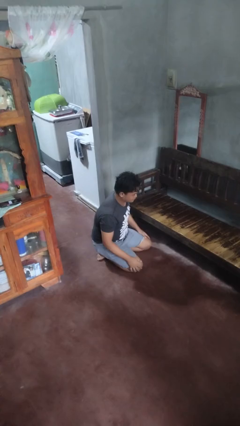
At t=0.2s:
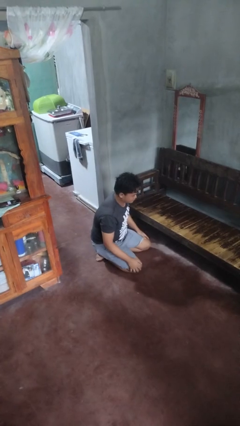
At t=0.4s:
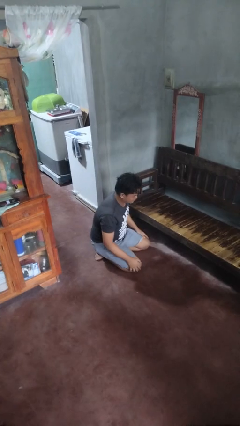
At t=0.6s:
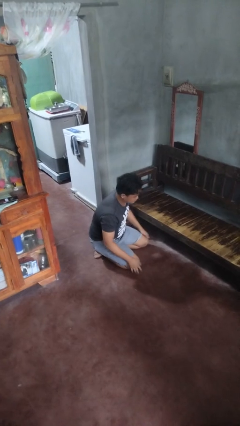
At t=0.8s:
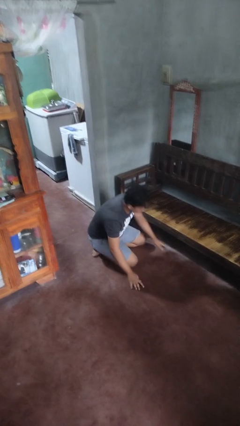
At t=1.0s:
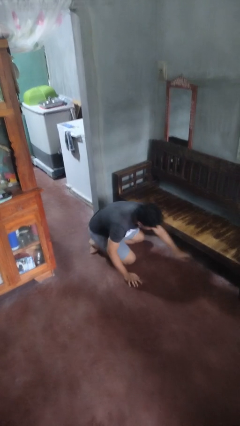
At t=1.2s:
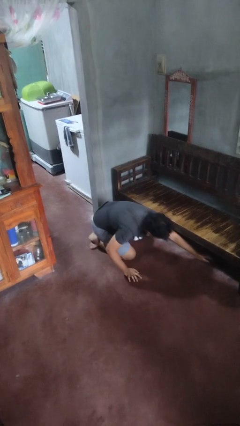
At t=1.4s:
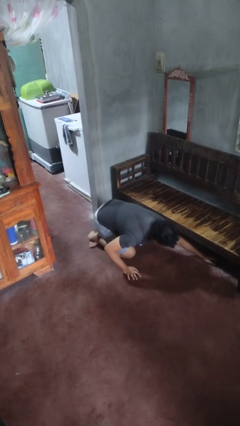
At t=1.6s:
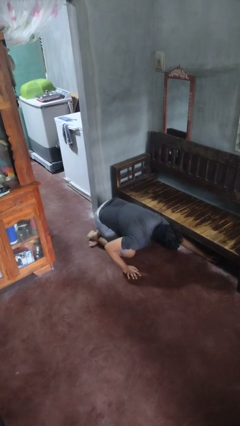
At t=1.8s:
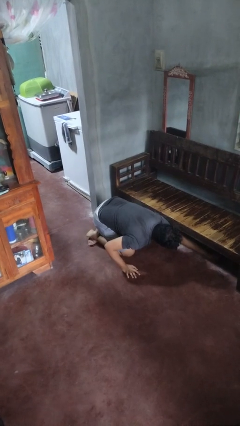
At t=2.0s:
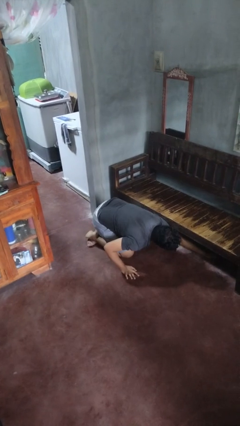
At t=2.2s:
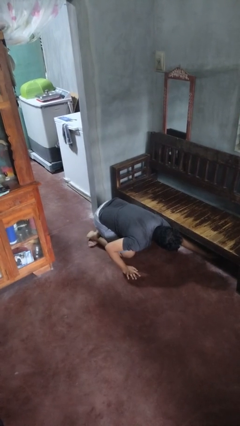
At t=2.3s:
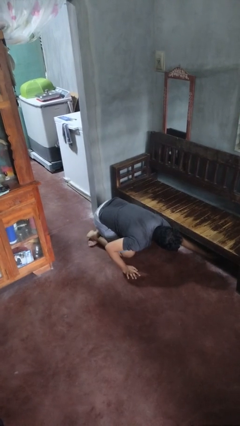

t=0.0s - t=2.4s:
person searches under couch

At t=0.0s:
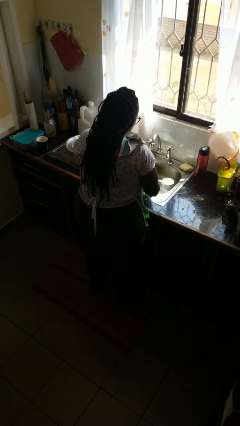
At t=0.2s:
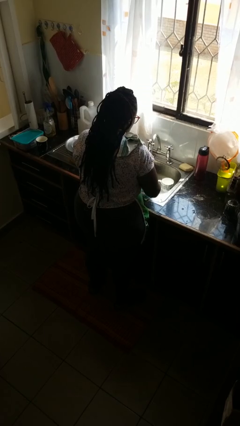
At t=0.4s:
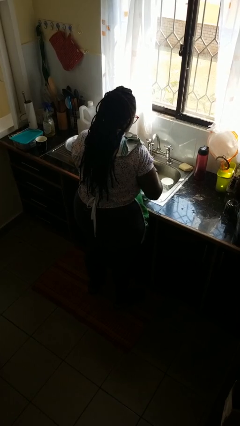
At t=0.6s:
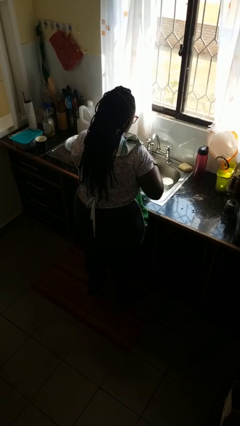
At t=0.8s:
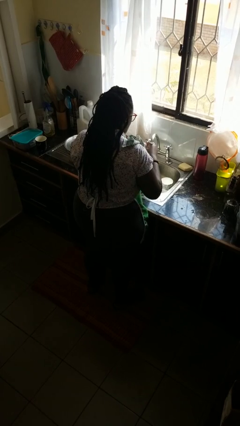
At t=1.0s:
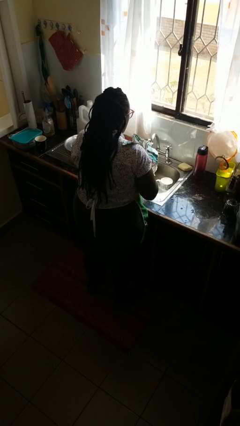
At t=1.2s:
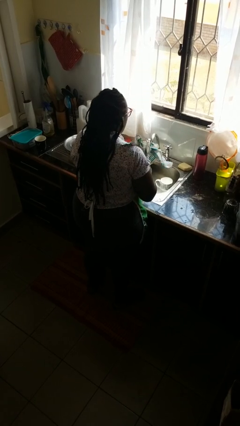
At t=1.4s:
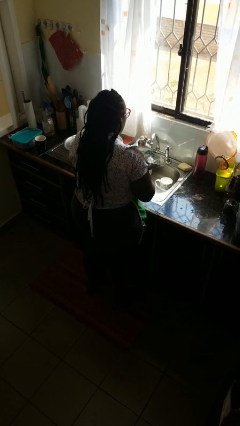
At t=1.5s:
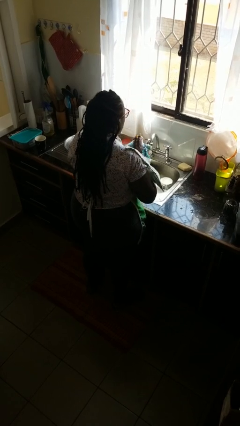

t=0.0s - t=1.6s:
person dries hands with towel

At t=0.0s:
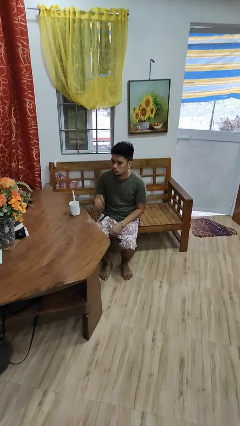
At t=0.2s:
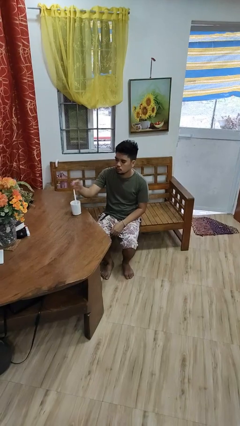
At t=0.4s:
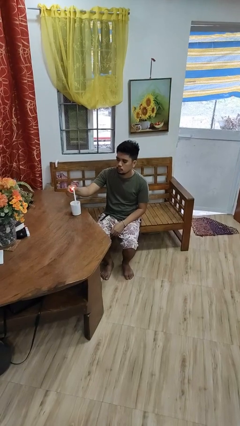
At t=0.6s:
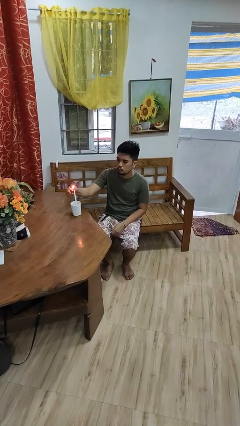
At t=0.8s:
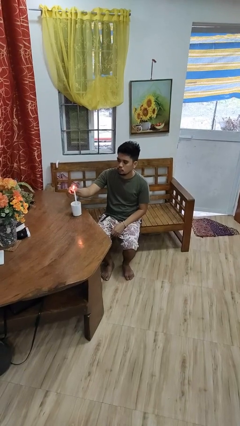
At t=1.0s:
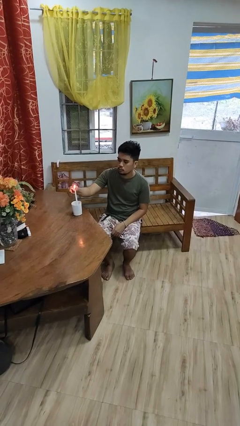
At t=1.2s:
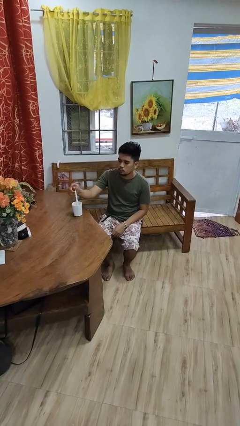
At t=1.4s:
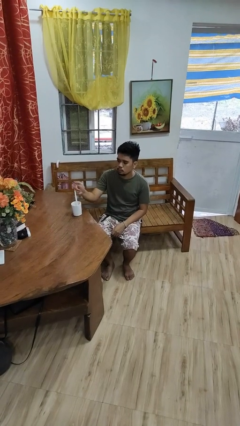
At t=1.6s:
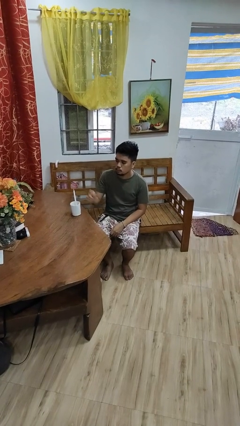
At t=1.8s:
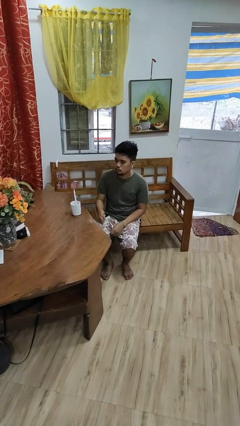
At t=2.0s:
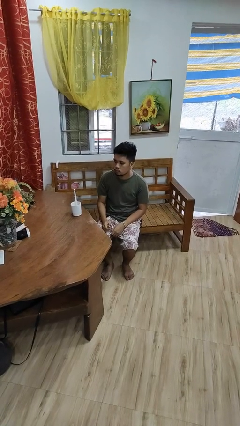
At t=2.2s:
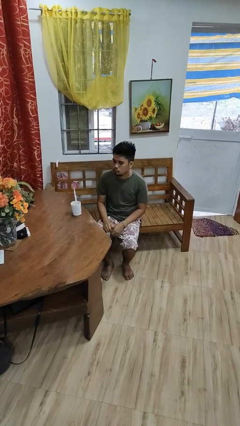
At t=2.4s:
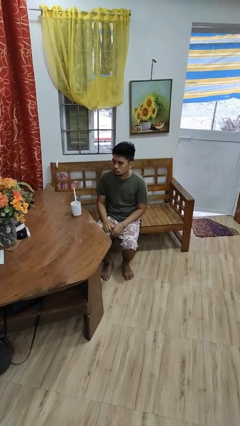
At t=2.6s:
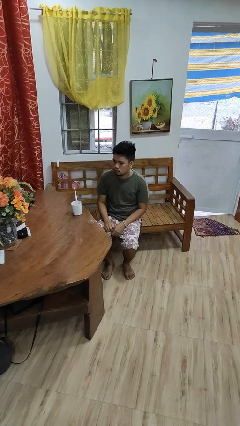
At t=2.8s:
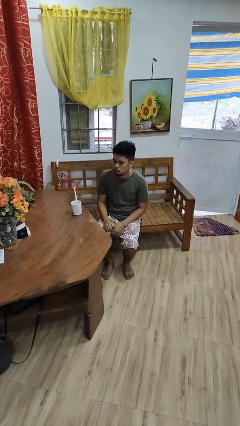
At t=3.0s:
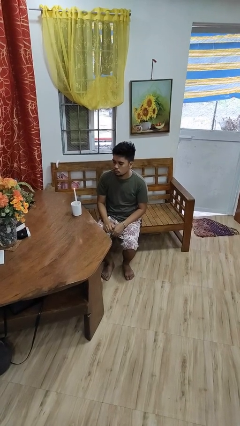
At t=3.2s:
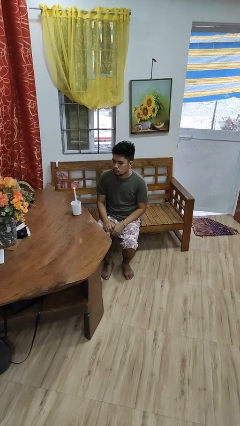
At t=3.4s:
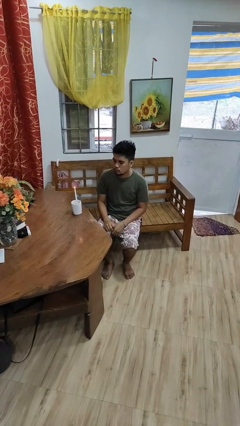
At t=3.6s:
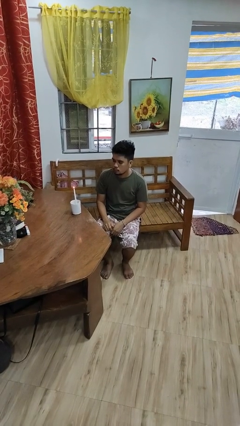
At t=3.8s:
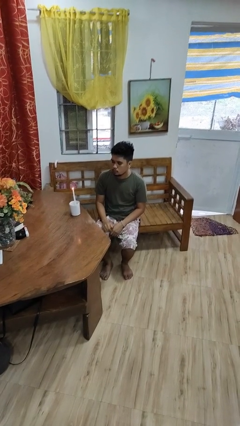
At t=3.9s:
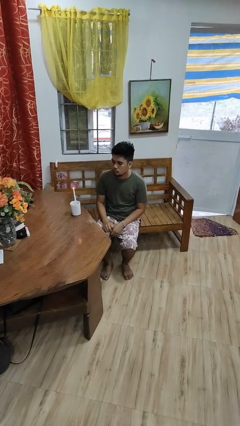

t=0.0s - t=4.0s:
person lights candle

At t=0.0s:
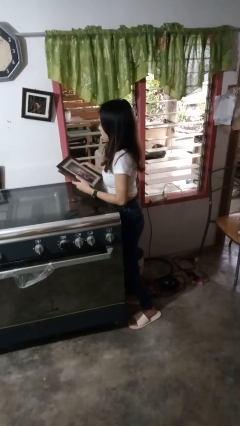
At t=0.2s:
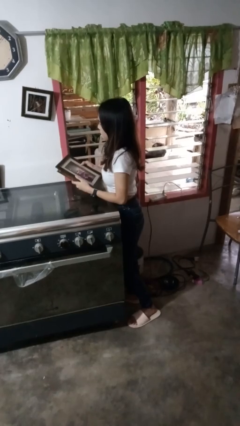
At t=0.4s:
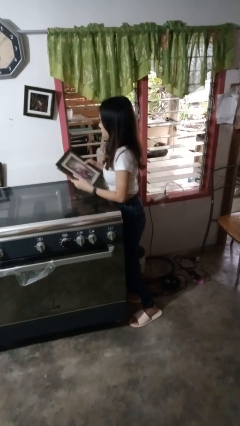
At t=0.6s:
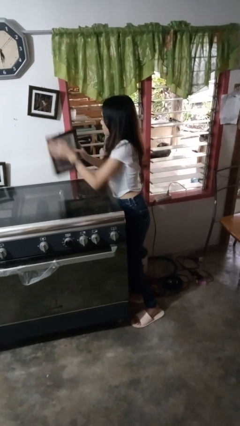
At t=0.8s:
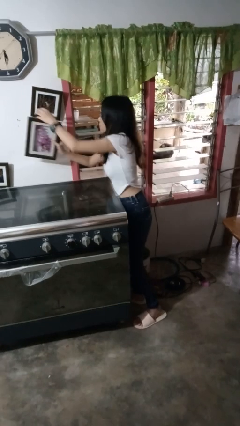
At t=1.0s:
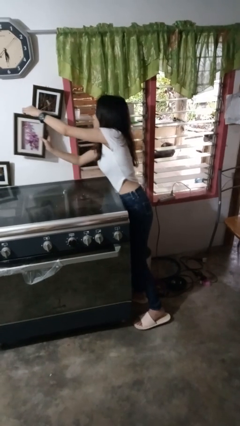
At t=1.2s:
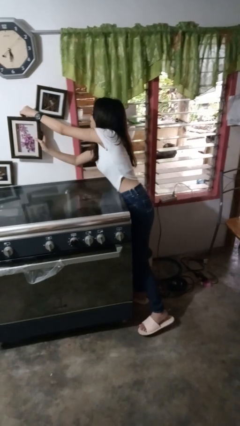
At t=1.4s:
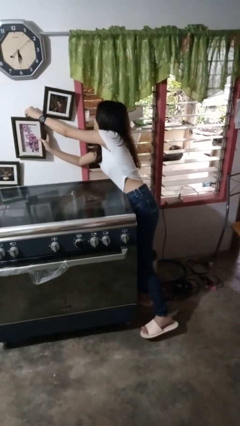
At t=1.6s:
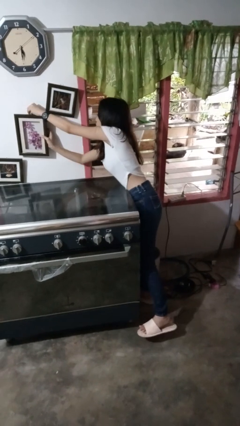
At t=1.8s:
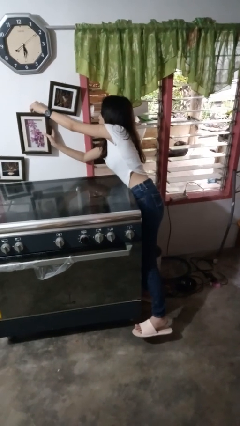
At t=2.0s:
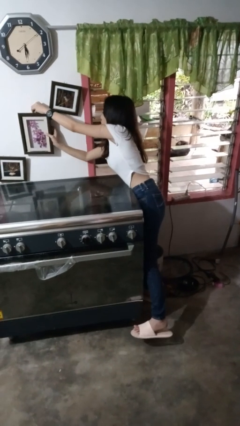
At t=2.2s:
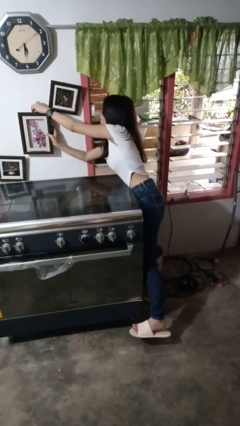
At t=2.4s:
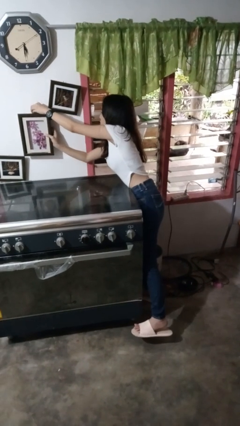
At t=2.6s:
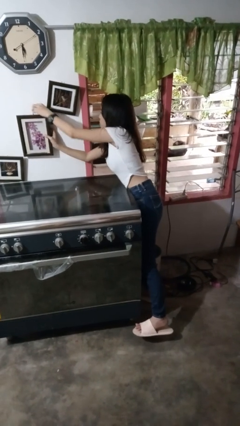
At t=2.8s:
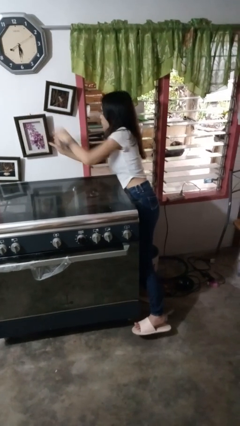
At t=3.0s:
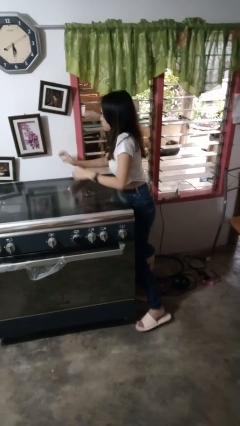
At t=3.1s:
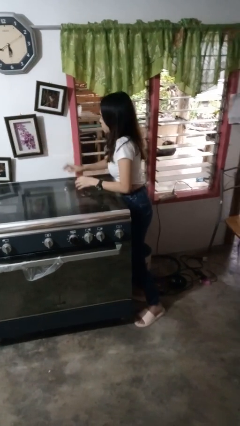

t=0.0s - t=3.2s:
person puts up picture frame

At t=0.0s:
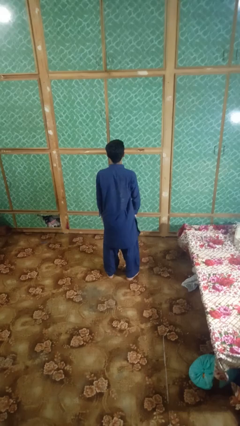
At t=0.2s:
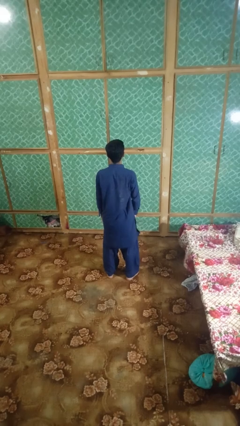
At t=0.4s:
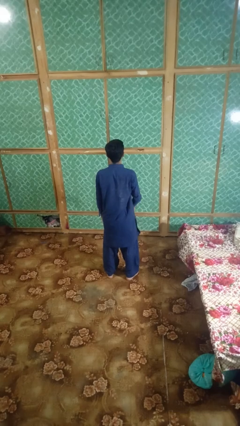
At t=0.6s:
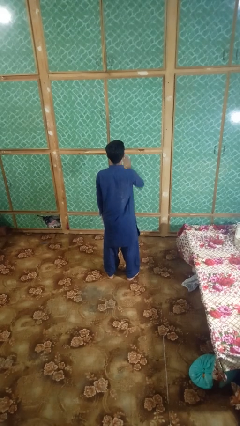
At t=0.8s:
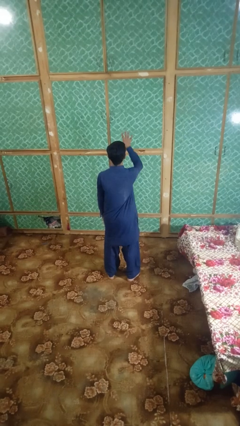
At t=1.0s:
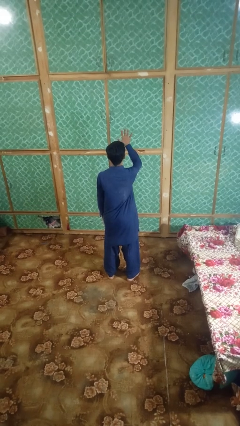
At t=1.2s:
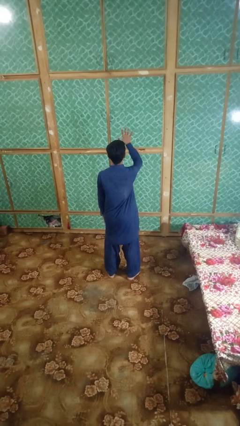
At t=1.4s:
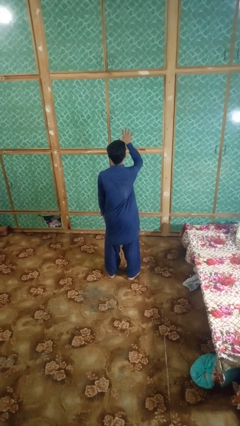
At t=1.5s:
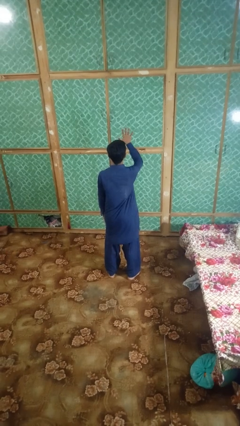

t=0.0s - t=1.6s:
person gestures number five

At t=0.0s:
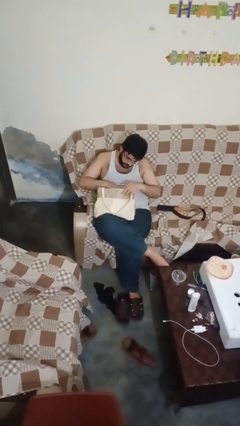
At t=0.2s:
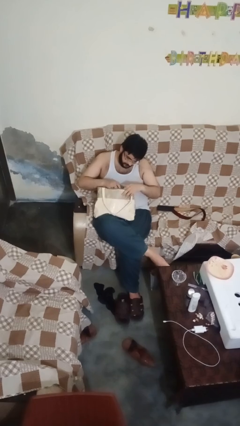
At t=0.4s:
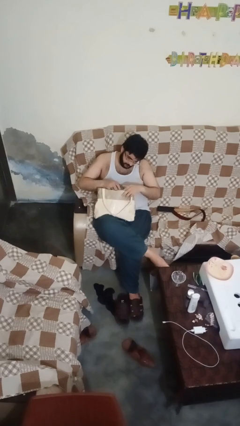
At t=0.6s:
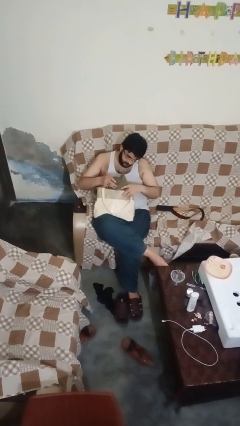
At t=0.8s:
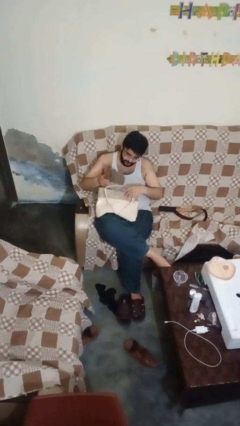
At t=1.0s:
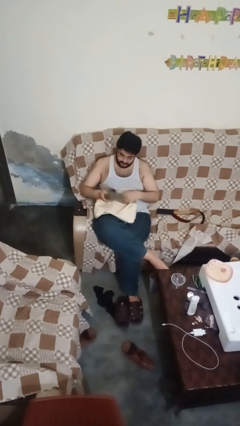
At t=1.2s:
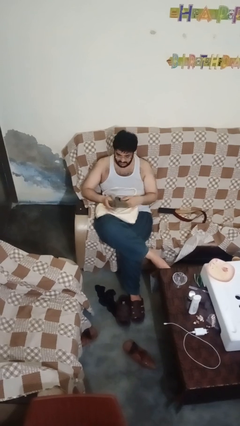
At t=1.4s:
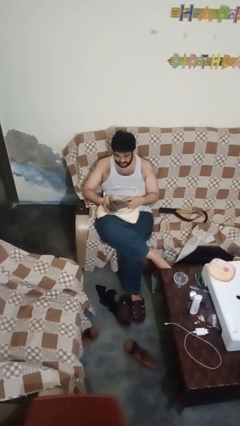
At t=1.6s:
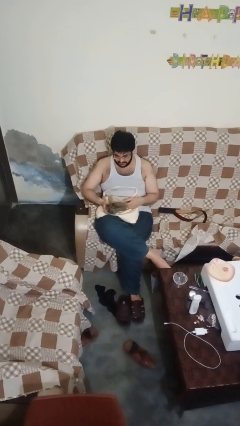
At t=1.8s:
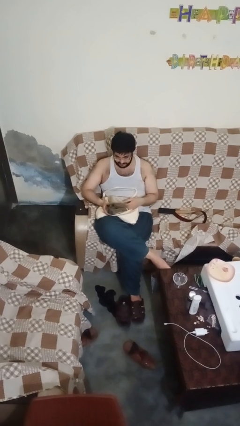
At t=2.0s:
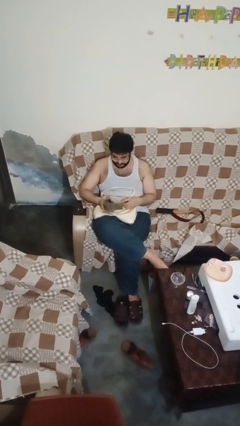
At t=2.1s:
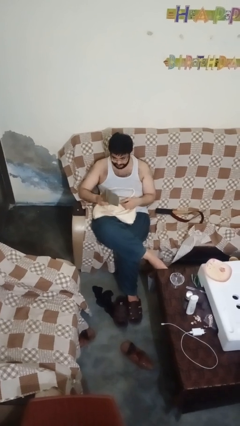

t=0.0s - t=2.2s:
person takes object from purse

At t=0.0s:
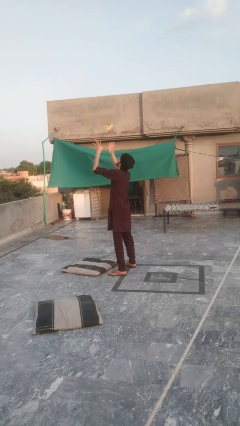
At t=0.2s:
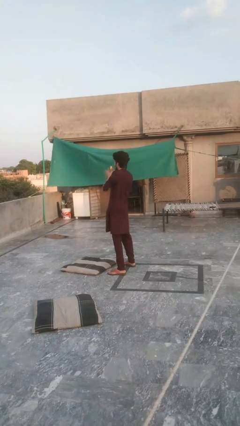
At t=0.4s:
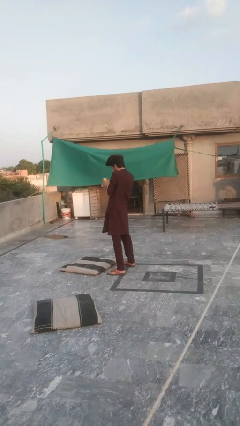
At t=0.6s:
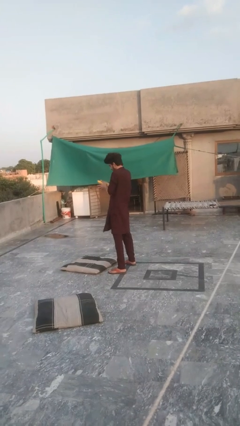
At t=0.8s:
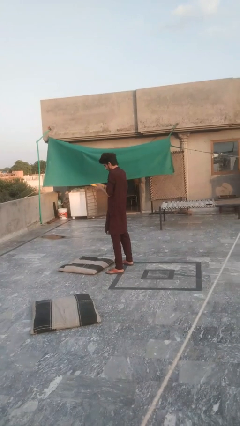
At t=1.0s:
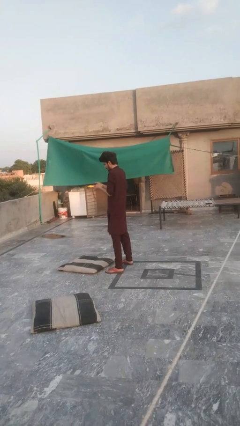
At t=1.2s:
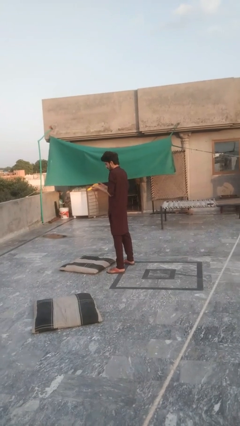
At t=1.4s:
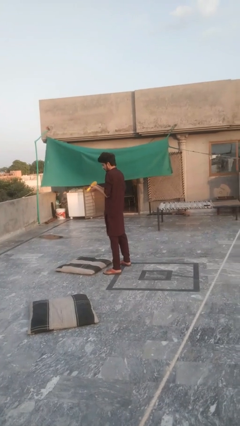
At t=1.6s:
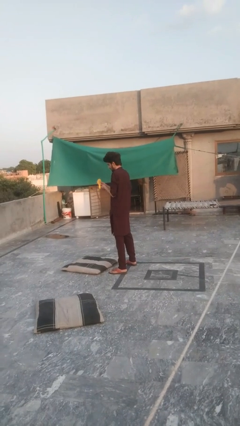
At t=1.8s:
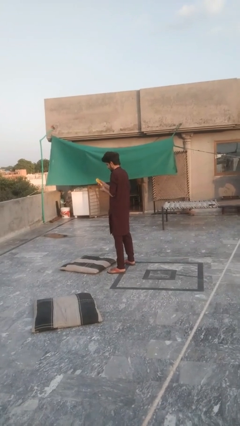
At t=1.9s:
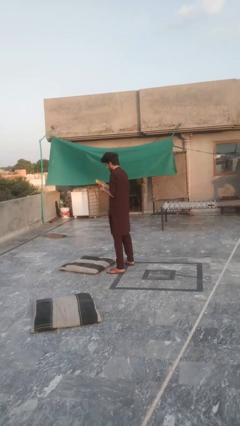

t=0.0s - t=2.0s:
person catches dropped object
